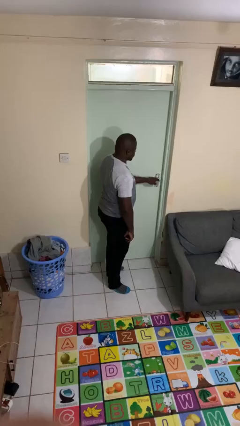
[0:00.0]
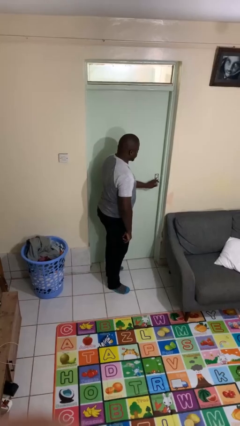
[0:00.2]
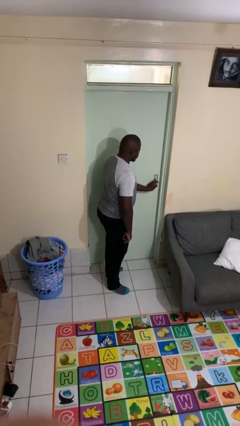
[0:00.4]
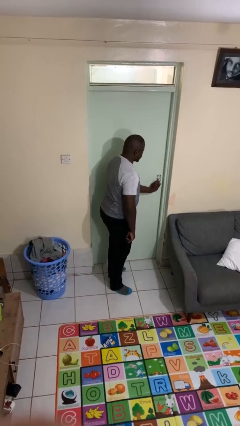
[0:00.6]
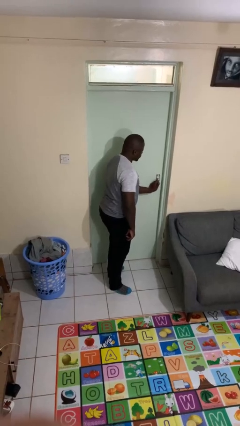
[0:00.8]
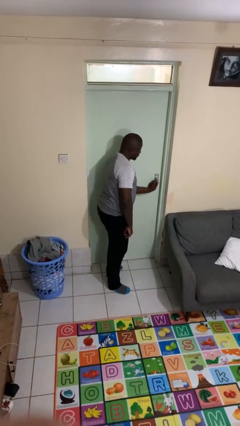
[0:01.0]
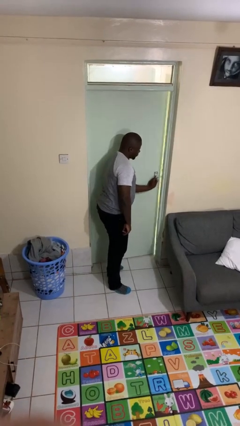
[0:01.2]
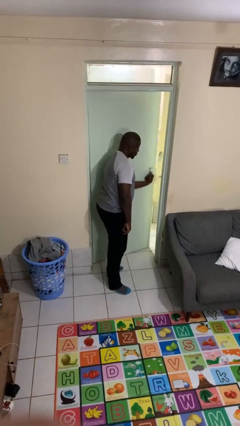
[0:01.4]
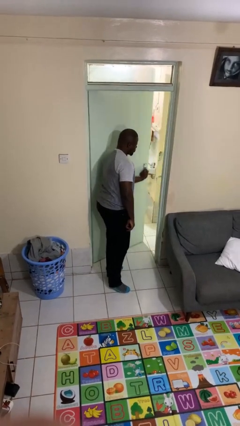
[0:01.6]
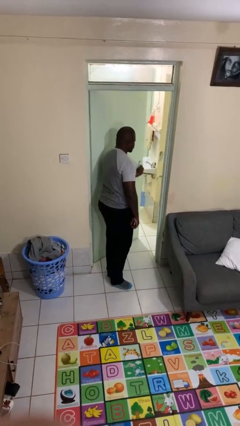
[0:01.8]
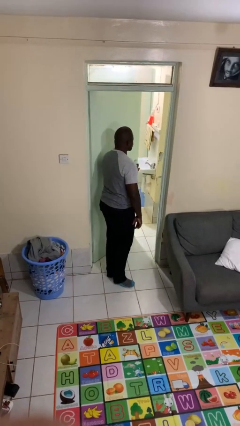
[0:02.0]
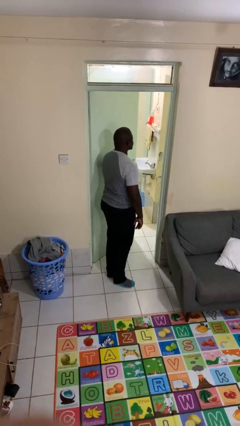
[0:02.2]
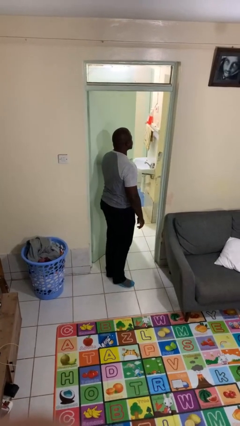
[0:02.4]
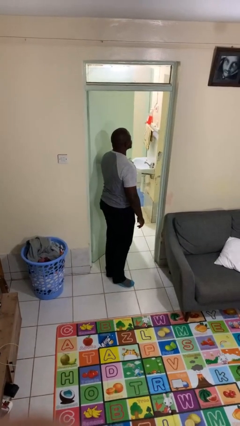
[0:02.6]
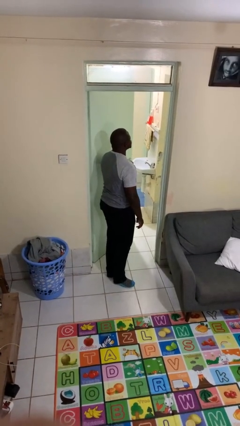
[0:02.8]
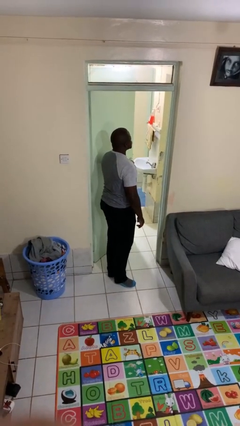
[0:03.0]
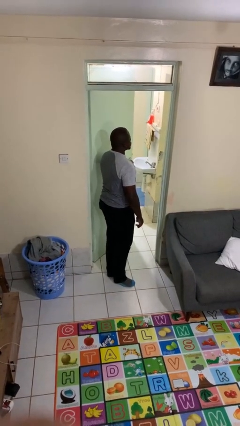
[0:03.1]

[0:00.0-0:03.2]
person opens facility door

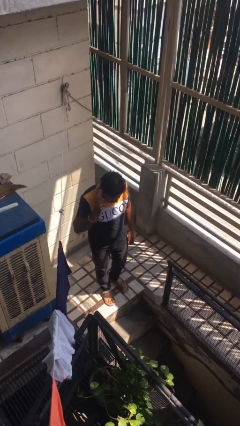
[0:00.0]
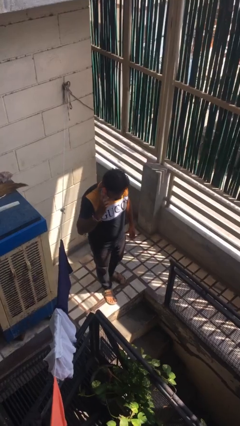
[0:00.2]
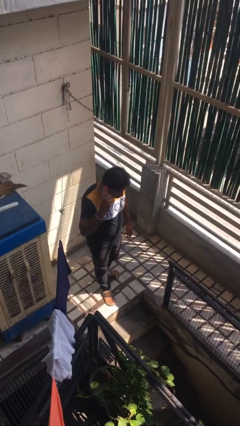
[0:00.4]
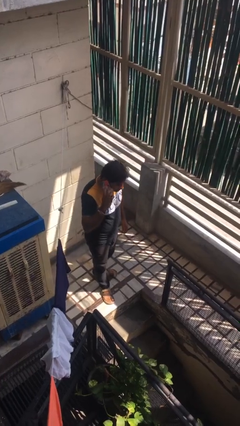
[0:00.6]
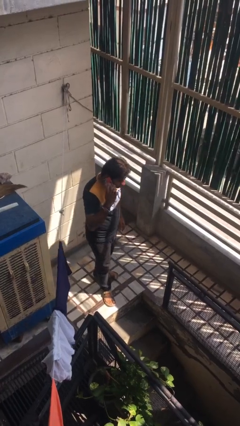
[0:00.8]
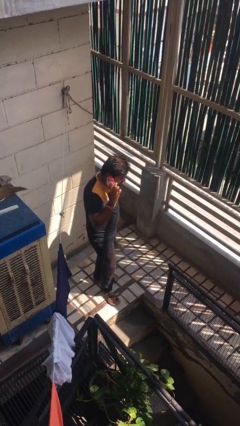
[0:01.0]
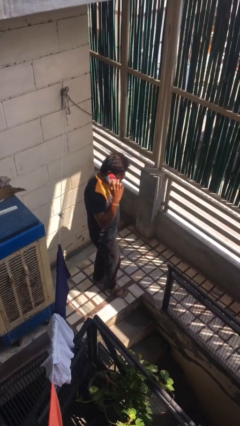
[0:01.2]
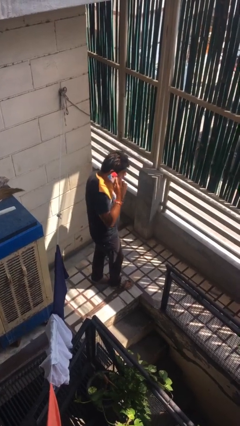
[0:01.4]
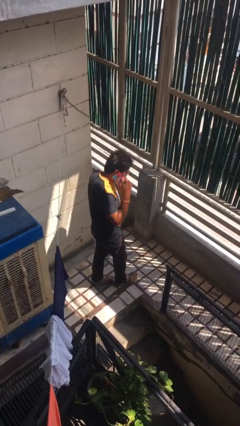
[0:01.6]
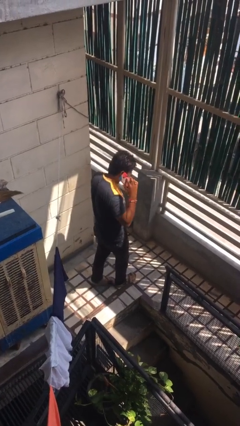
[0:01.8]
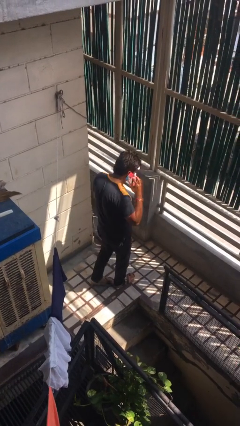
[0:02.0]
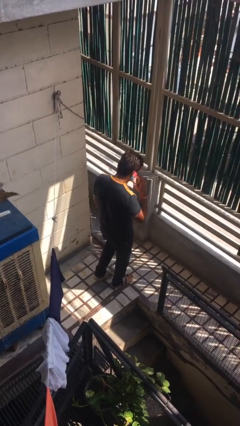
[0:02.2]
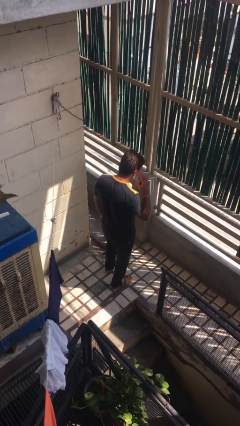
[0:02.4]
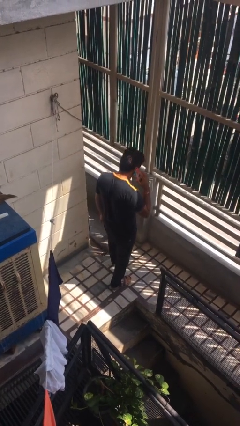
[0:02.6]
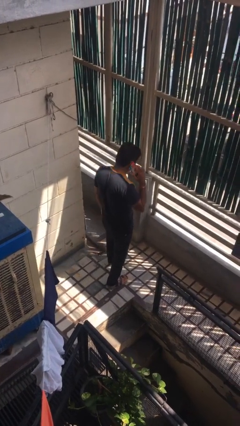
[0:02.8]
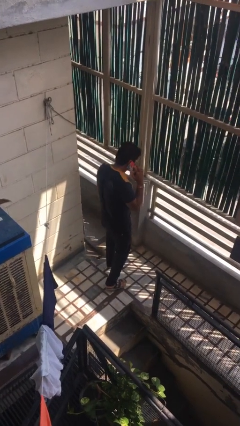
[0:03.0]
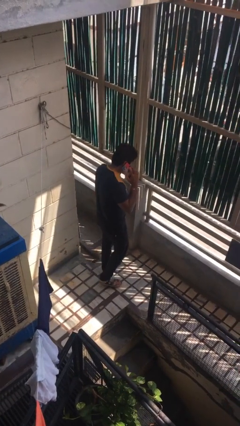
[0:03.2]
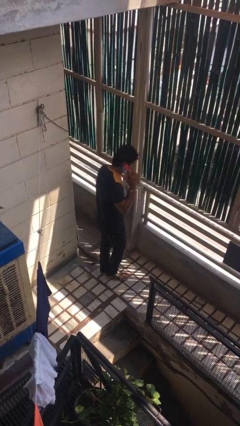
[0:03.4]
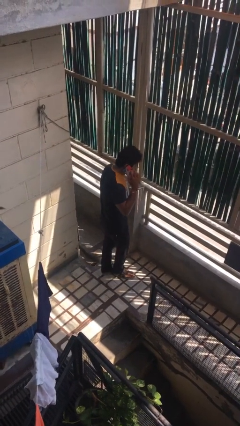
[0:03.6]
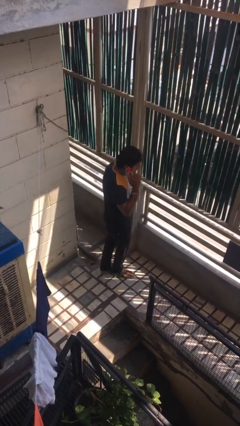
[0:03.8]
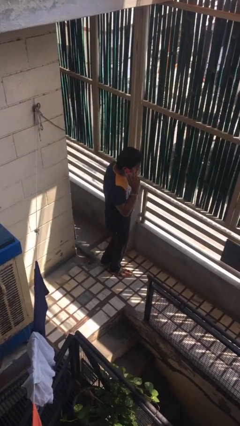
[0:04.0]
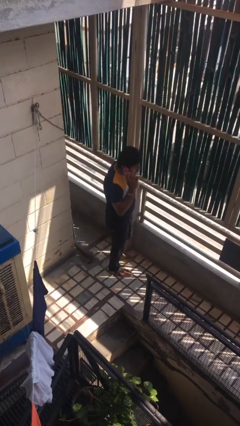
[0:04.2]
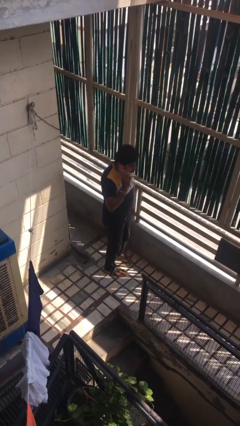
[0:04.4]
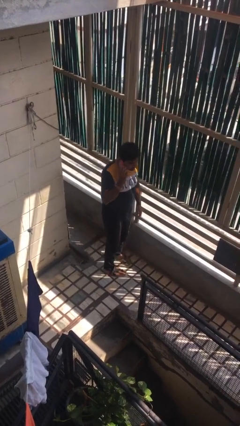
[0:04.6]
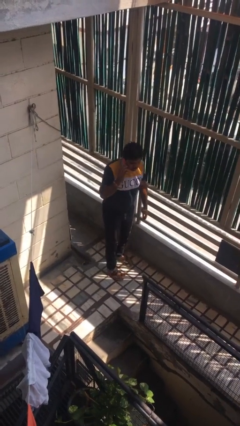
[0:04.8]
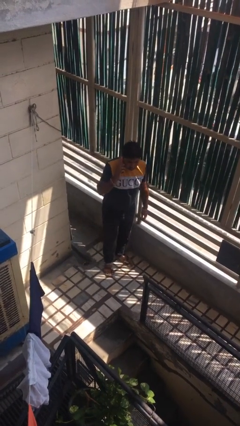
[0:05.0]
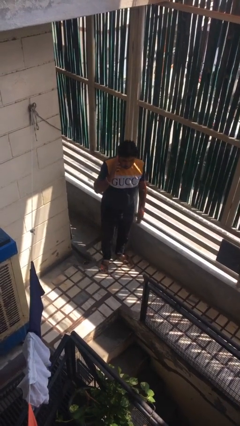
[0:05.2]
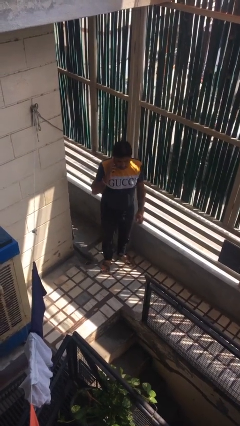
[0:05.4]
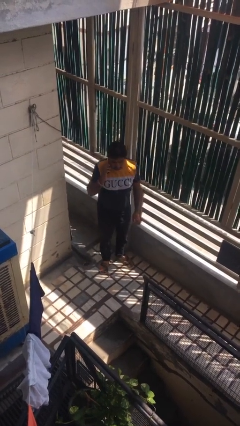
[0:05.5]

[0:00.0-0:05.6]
person talks on phone

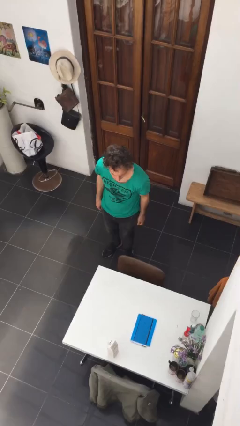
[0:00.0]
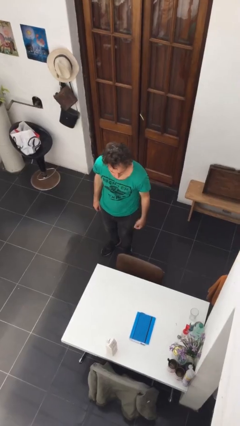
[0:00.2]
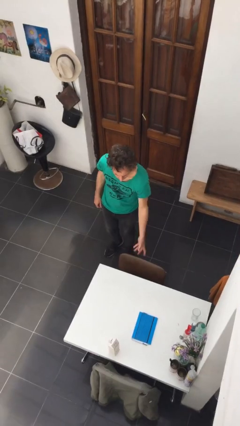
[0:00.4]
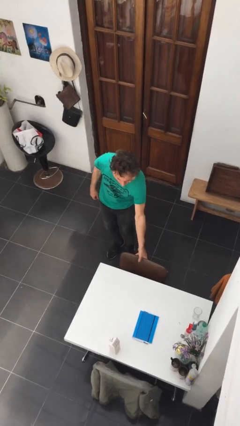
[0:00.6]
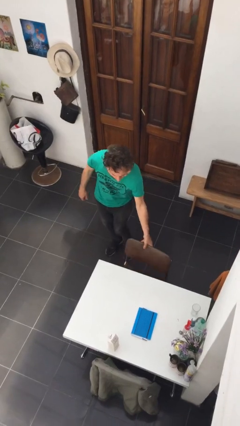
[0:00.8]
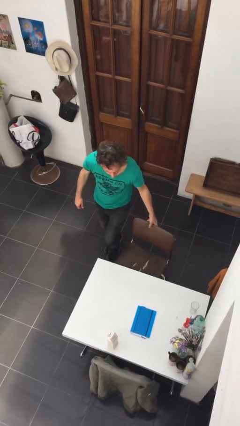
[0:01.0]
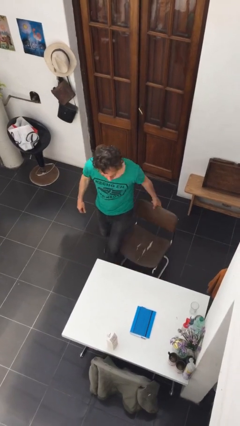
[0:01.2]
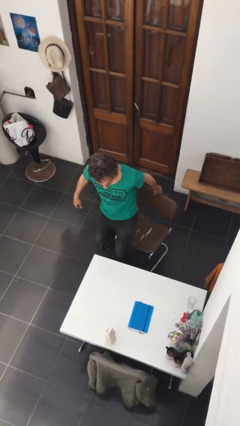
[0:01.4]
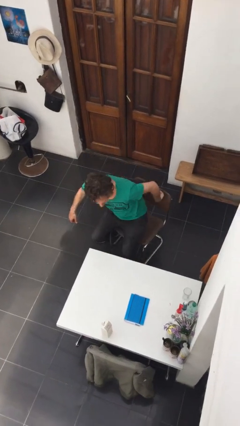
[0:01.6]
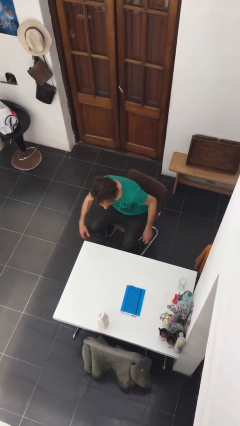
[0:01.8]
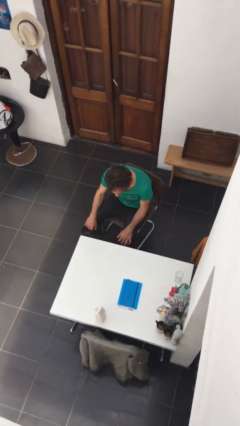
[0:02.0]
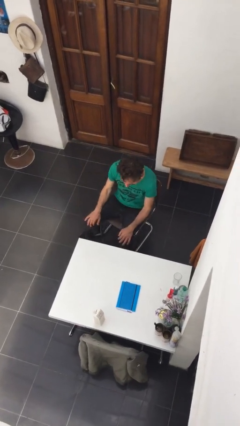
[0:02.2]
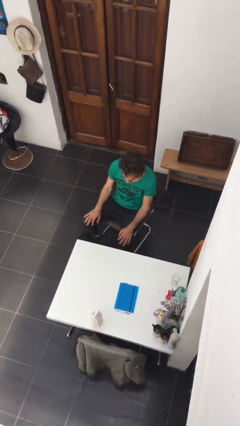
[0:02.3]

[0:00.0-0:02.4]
person sits down

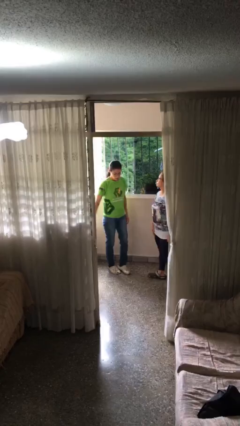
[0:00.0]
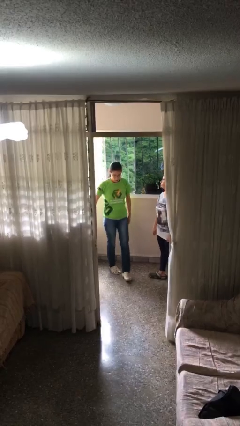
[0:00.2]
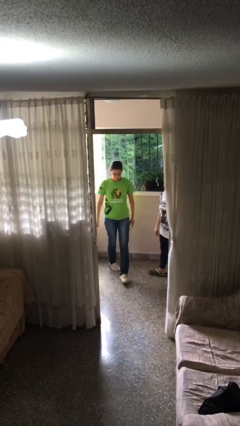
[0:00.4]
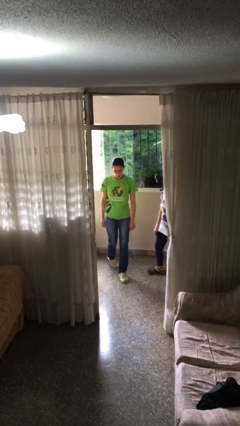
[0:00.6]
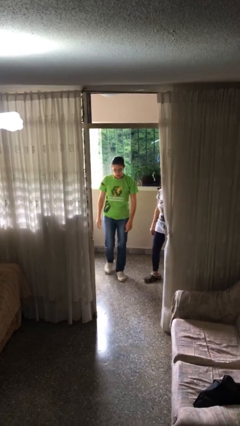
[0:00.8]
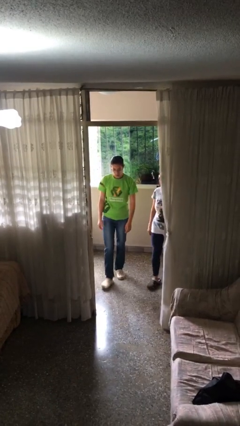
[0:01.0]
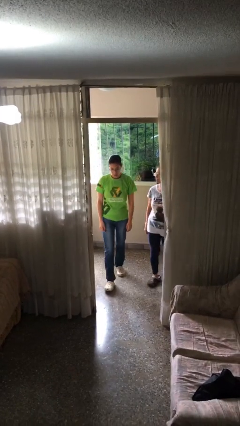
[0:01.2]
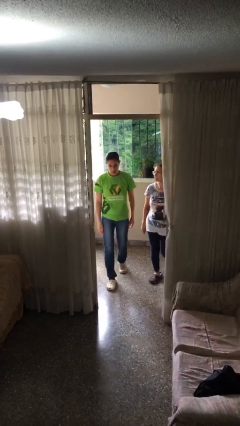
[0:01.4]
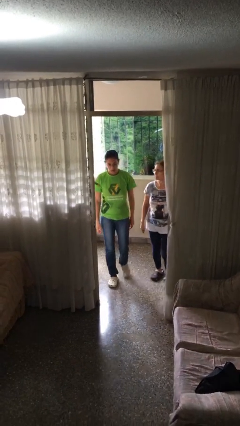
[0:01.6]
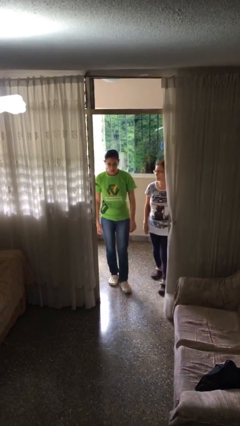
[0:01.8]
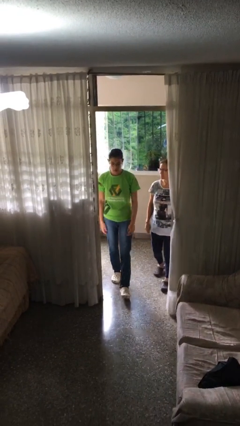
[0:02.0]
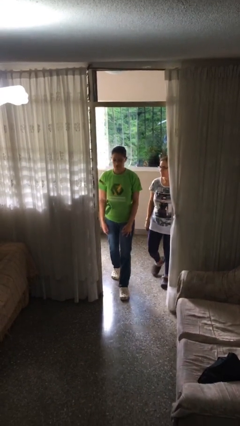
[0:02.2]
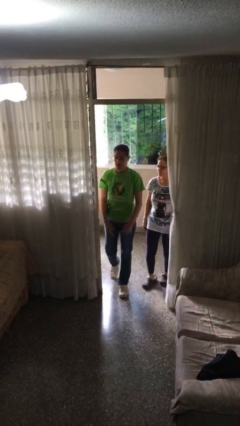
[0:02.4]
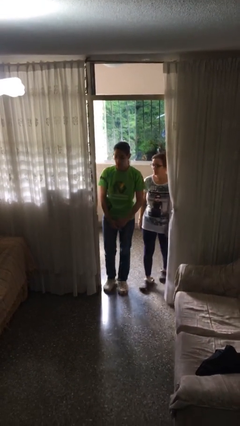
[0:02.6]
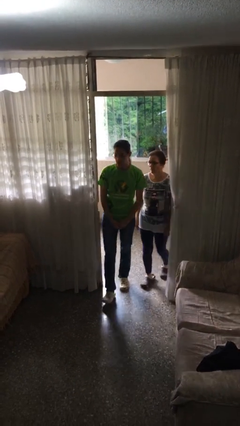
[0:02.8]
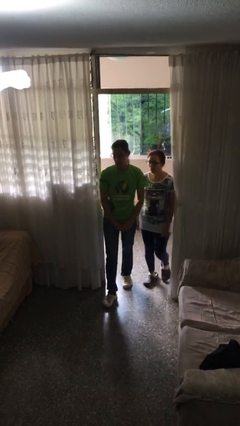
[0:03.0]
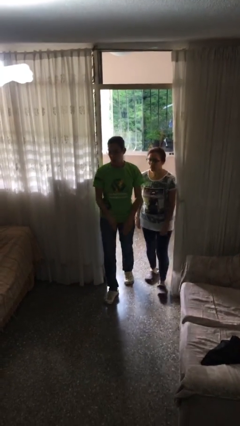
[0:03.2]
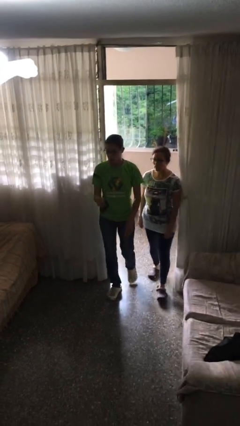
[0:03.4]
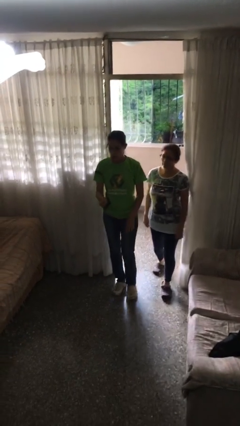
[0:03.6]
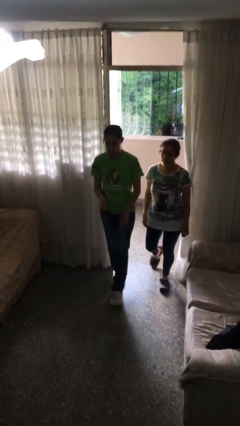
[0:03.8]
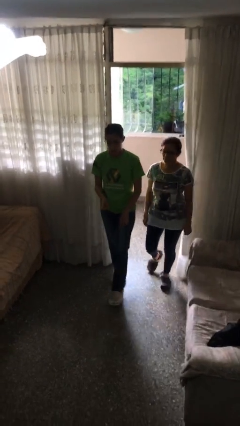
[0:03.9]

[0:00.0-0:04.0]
person talks to person

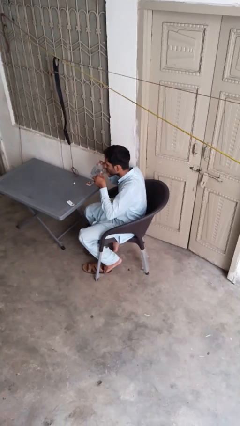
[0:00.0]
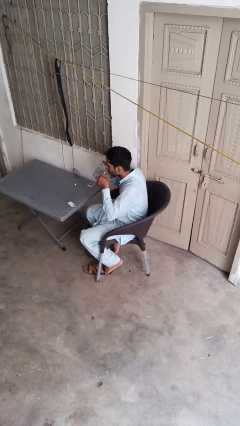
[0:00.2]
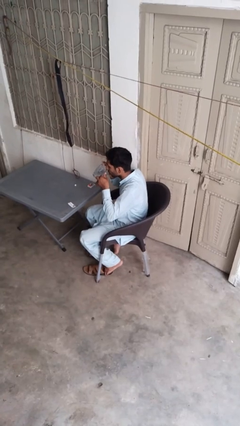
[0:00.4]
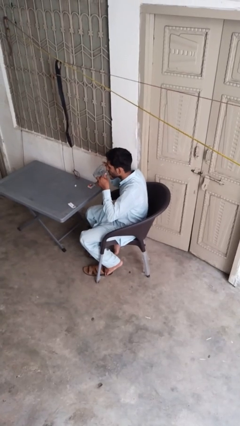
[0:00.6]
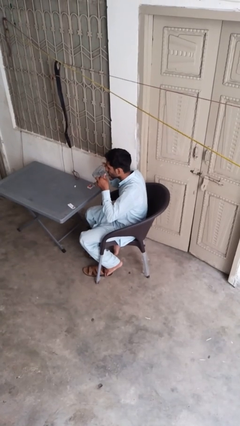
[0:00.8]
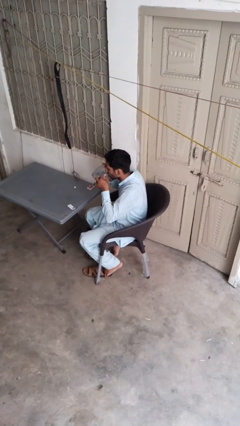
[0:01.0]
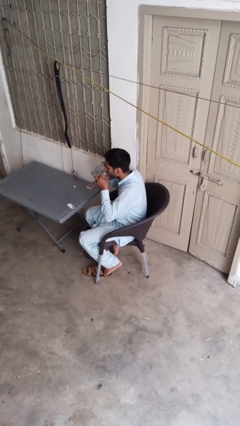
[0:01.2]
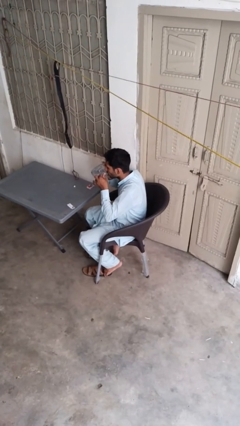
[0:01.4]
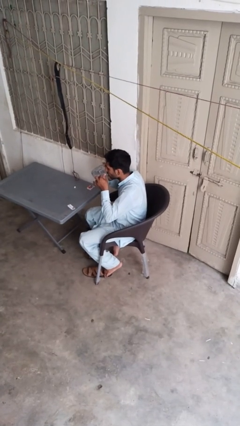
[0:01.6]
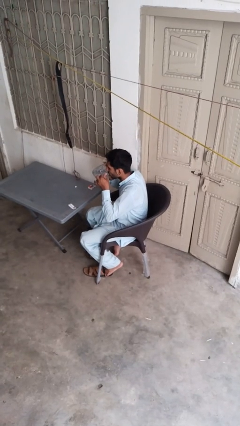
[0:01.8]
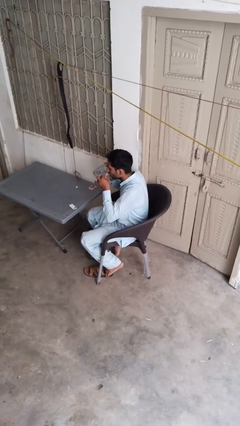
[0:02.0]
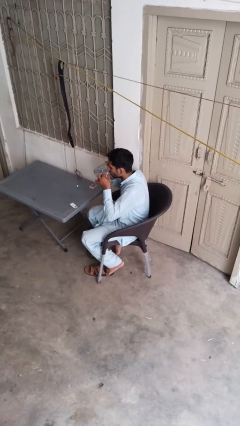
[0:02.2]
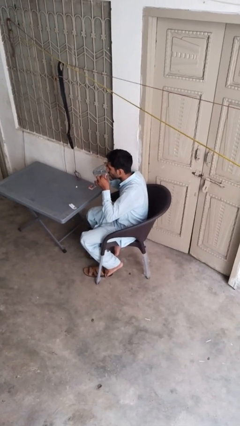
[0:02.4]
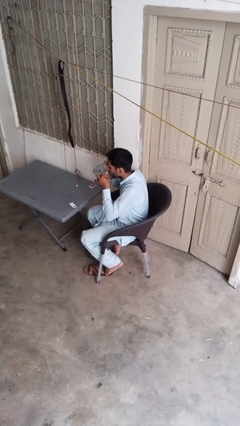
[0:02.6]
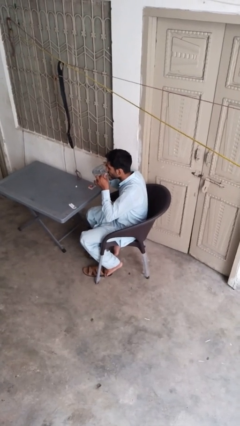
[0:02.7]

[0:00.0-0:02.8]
person drinks from cup
